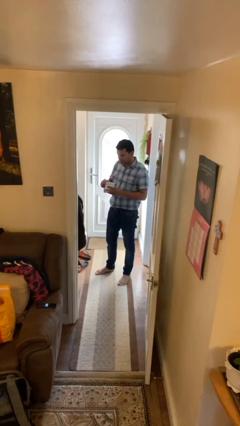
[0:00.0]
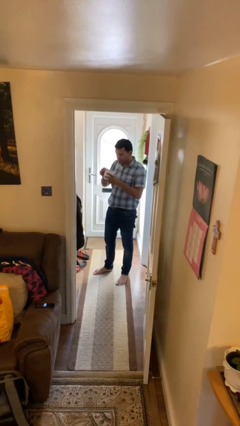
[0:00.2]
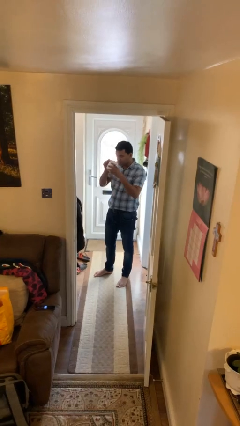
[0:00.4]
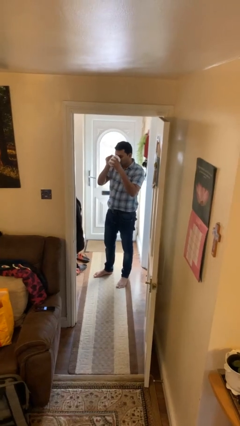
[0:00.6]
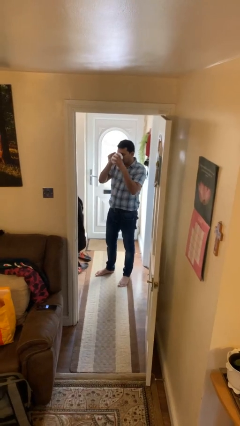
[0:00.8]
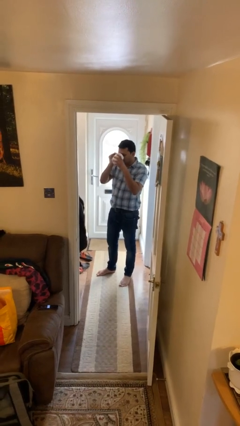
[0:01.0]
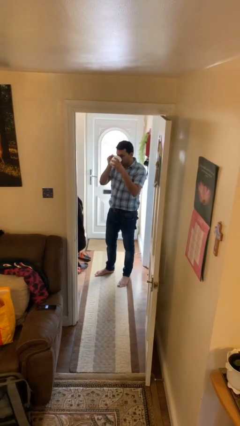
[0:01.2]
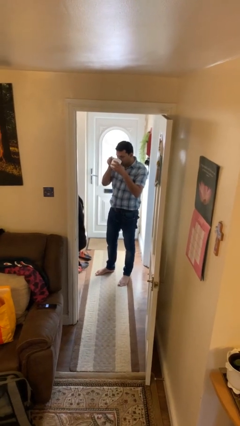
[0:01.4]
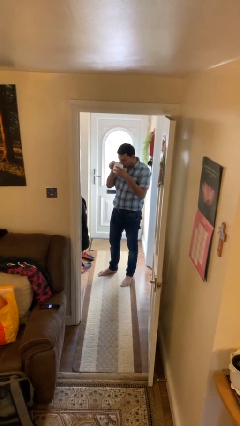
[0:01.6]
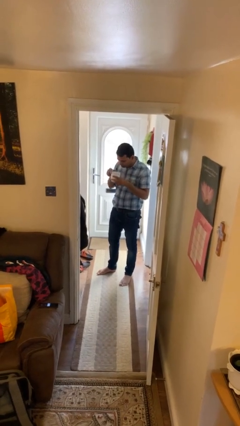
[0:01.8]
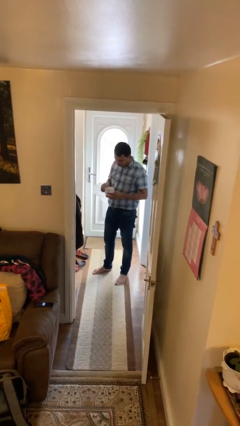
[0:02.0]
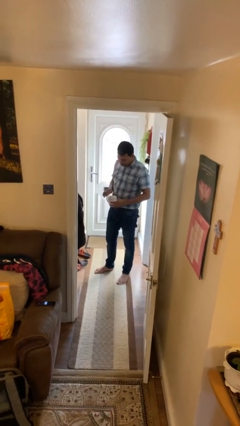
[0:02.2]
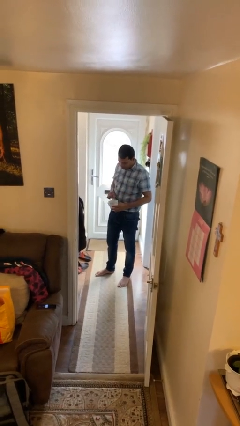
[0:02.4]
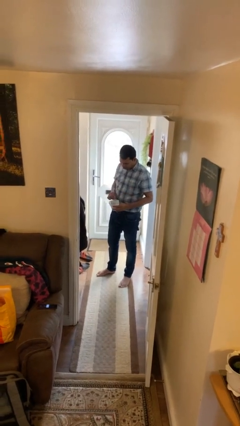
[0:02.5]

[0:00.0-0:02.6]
person drinks from mug

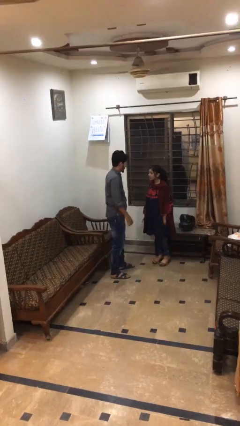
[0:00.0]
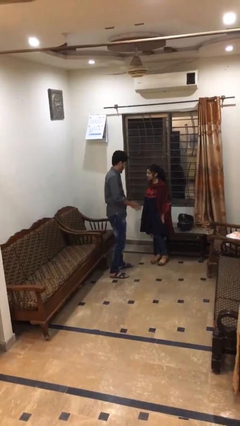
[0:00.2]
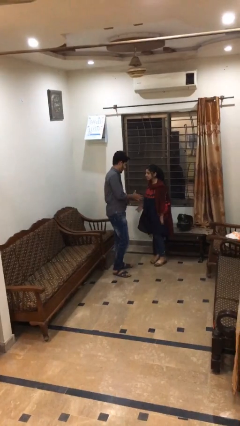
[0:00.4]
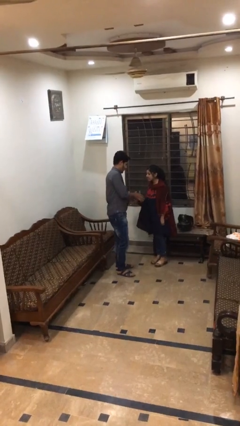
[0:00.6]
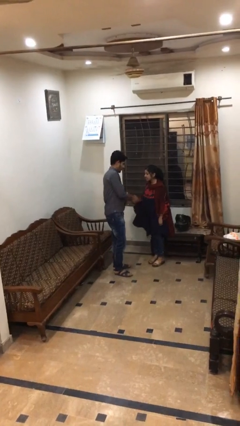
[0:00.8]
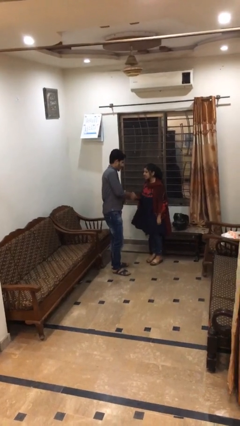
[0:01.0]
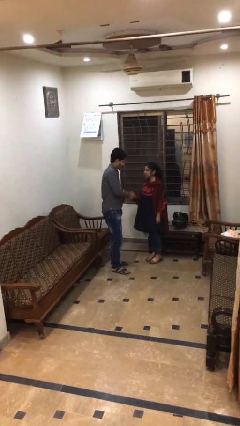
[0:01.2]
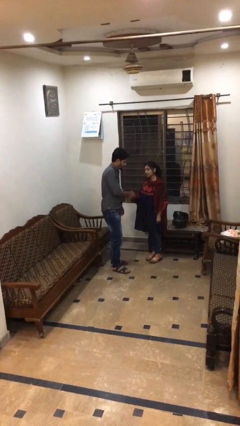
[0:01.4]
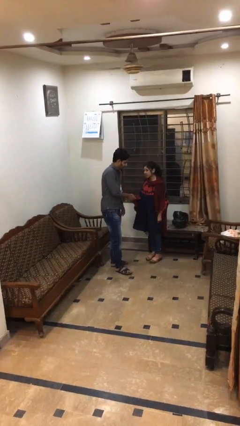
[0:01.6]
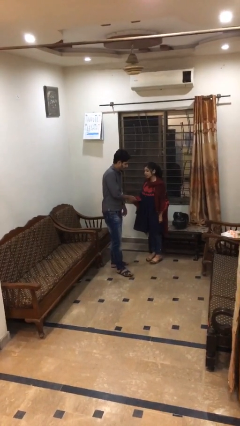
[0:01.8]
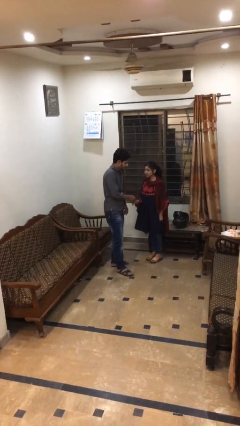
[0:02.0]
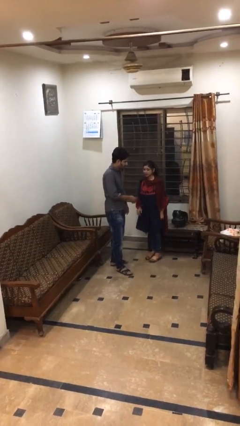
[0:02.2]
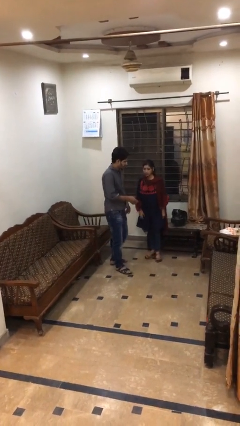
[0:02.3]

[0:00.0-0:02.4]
person shakes hand

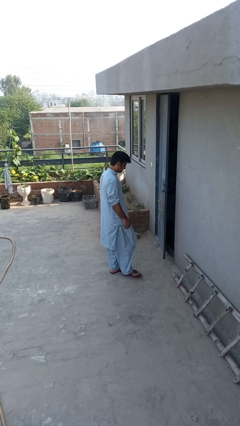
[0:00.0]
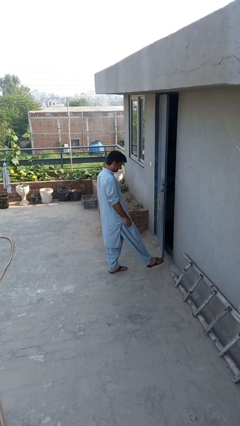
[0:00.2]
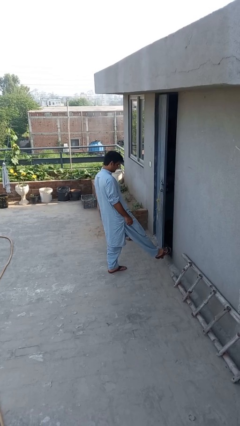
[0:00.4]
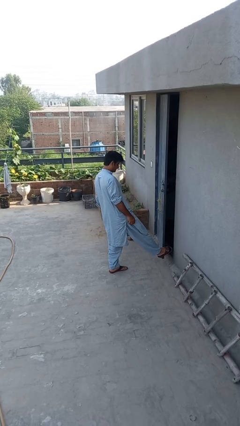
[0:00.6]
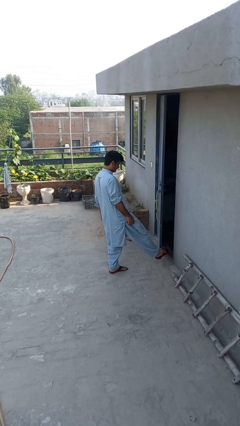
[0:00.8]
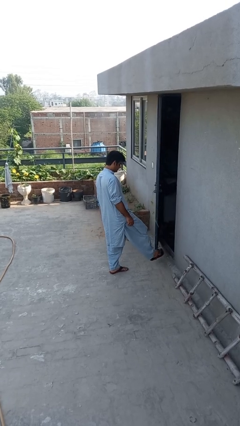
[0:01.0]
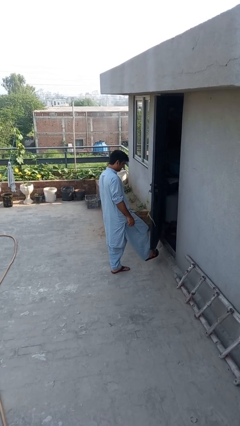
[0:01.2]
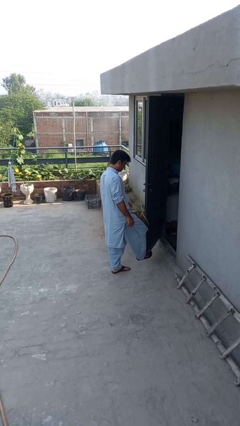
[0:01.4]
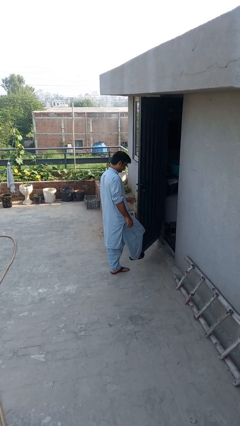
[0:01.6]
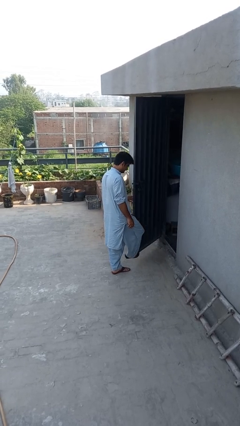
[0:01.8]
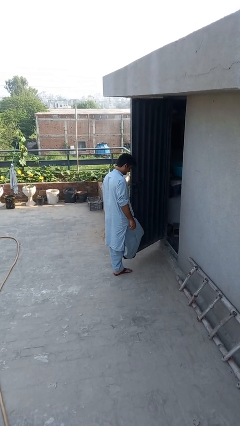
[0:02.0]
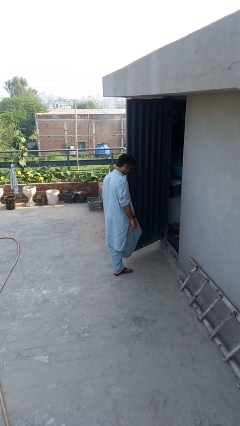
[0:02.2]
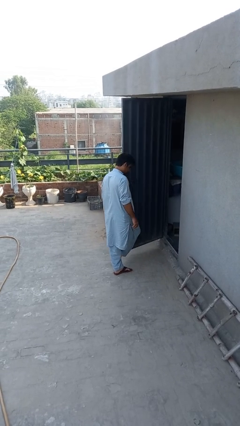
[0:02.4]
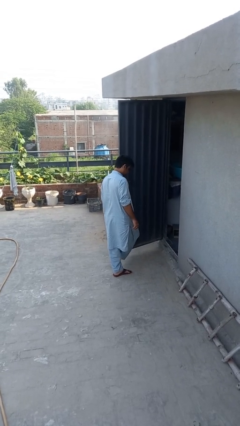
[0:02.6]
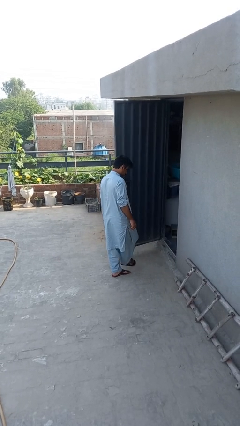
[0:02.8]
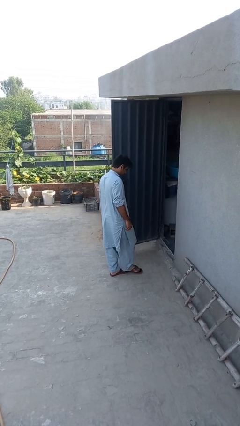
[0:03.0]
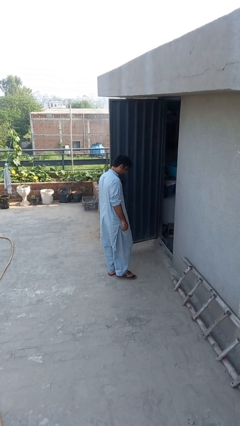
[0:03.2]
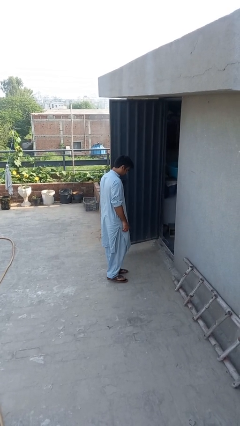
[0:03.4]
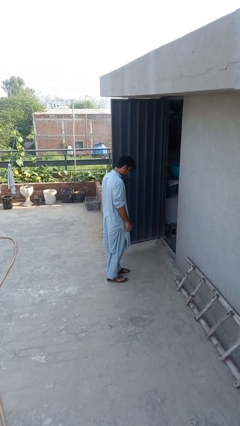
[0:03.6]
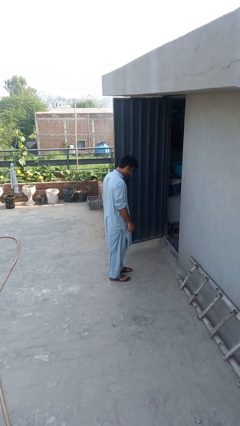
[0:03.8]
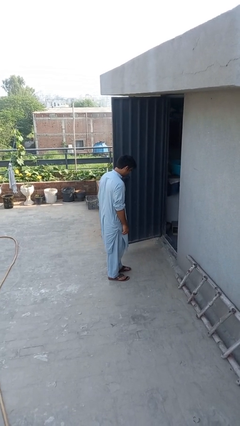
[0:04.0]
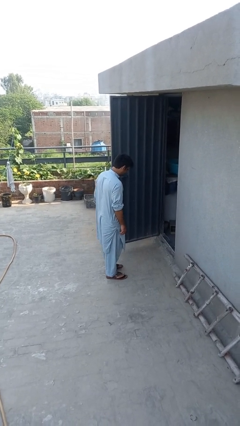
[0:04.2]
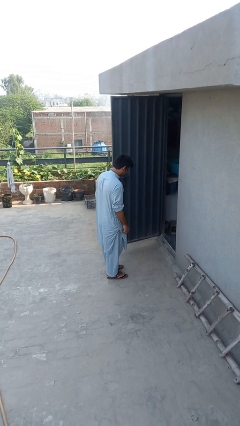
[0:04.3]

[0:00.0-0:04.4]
person opens facility door

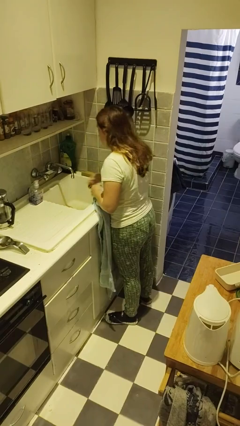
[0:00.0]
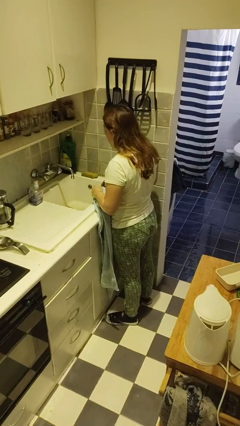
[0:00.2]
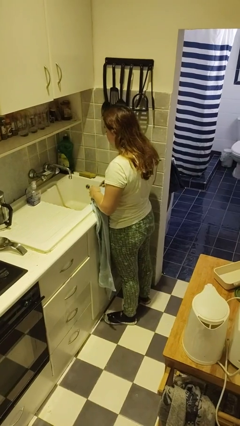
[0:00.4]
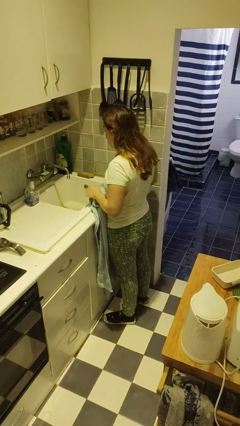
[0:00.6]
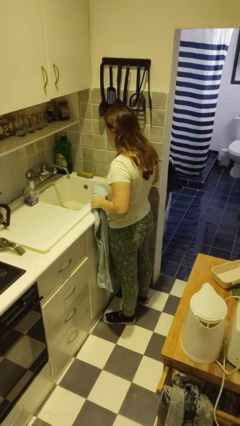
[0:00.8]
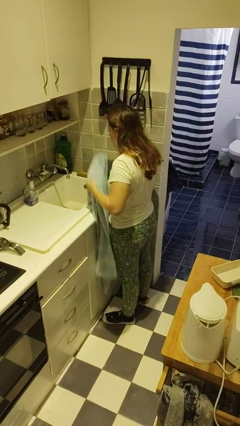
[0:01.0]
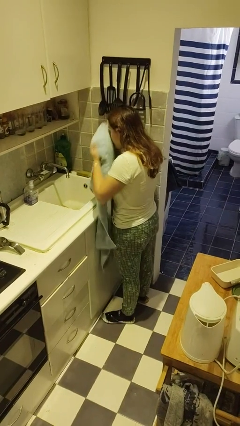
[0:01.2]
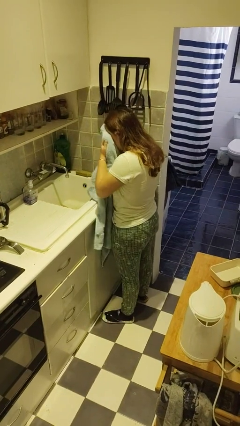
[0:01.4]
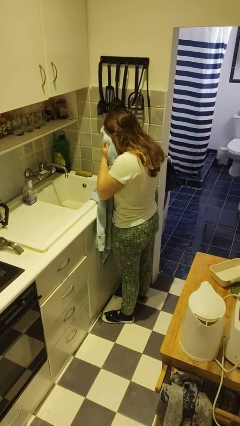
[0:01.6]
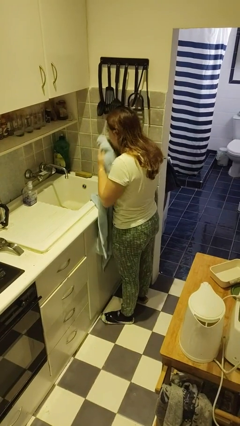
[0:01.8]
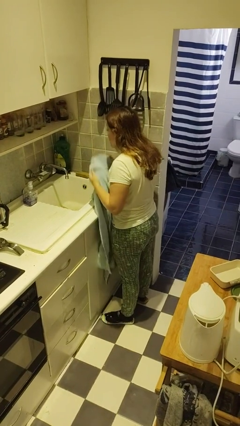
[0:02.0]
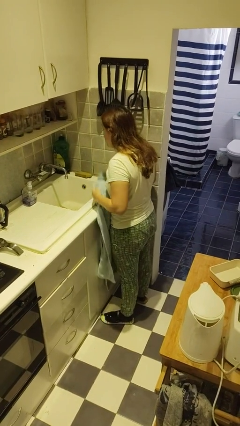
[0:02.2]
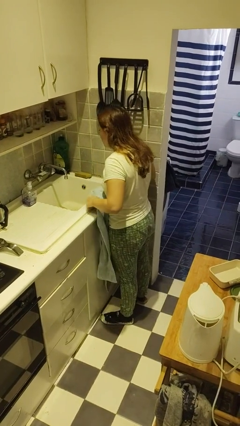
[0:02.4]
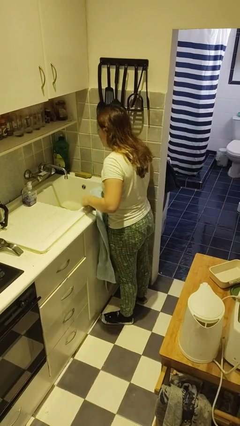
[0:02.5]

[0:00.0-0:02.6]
person dries face with towel

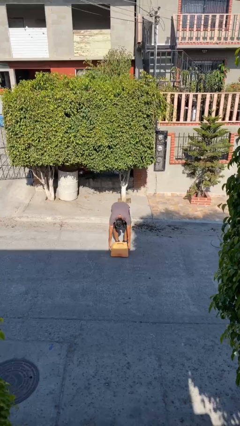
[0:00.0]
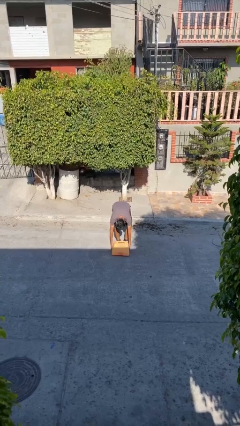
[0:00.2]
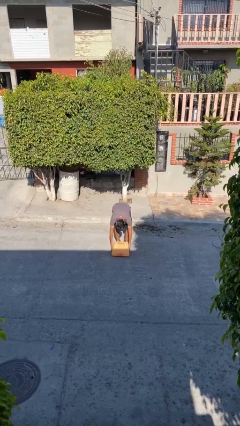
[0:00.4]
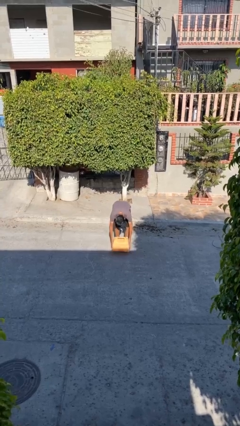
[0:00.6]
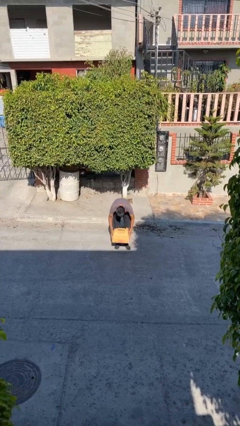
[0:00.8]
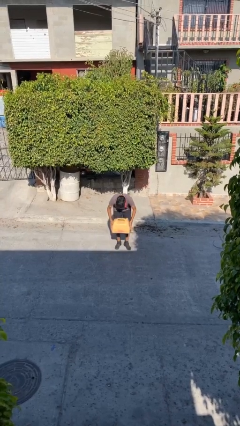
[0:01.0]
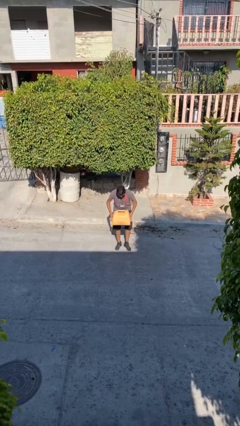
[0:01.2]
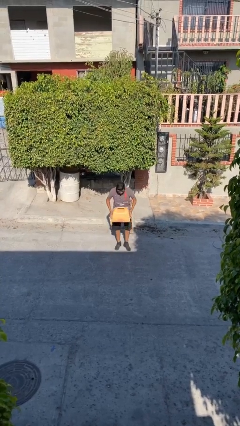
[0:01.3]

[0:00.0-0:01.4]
person picks up object from floor

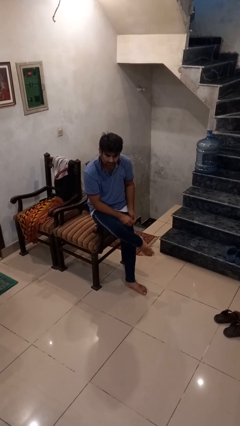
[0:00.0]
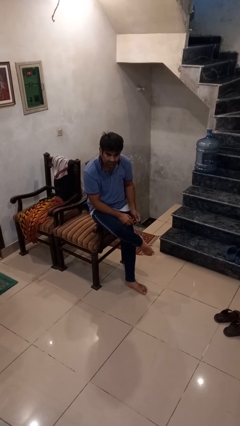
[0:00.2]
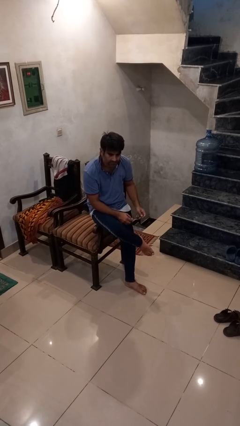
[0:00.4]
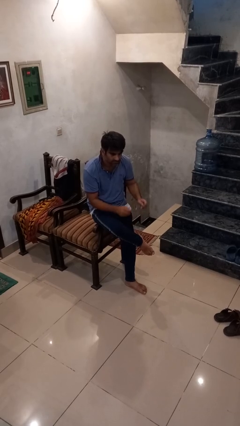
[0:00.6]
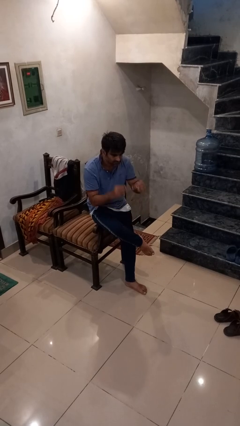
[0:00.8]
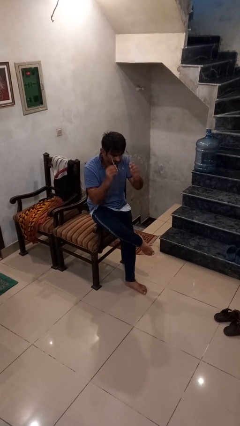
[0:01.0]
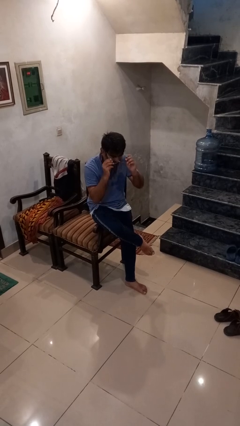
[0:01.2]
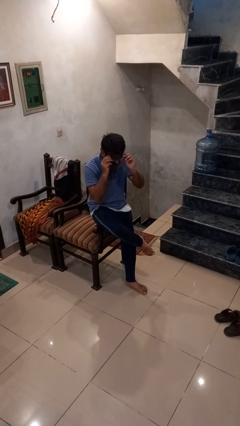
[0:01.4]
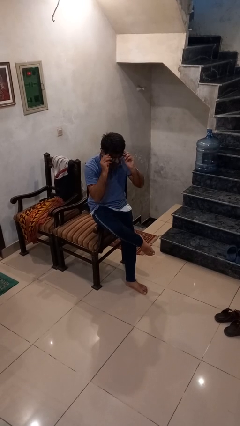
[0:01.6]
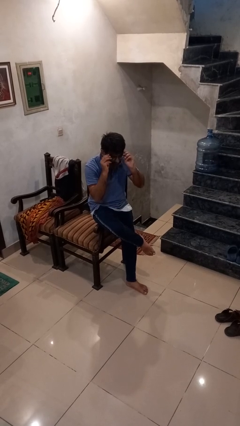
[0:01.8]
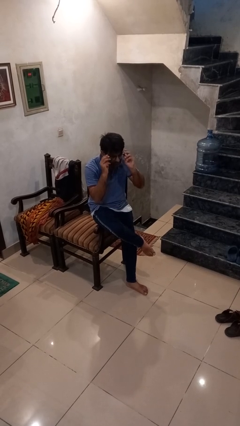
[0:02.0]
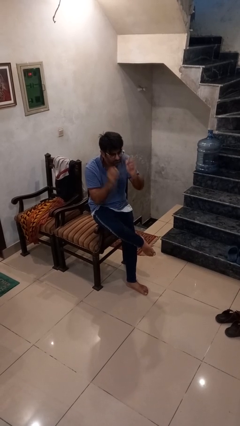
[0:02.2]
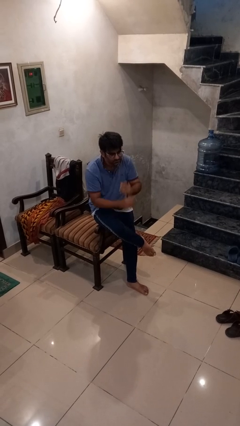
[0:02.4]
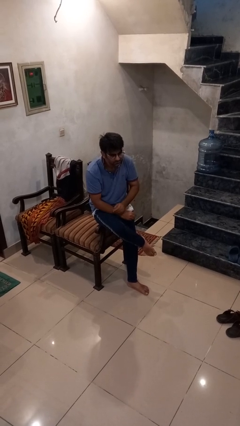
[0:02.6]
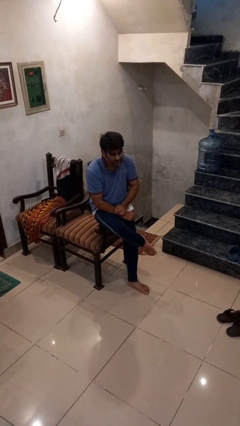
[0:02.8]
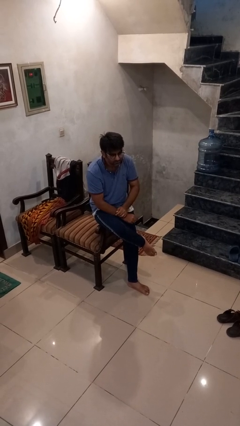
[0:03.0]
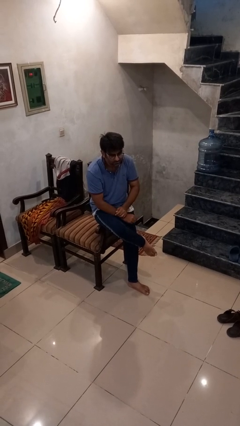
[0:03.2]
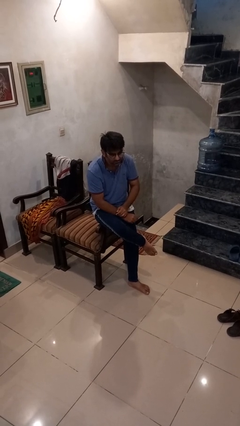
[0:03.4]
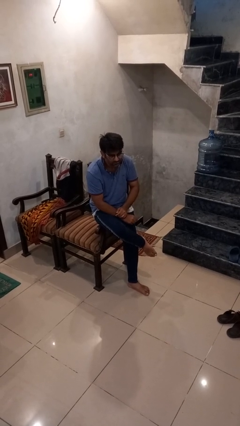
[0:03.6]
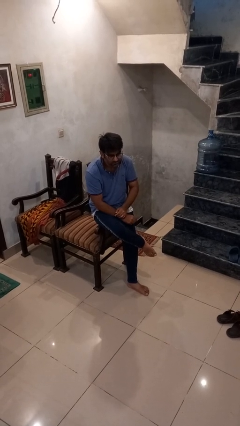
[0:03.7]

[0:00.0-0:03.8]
person puts on glasses
